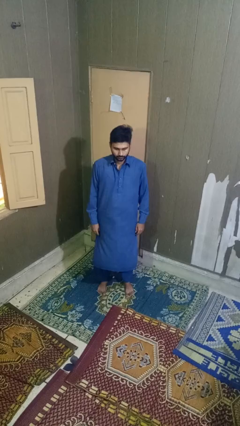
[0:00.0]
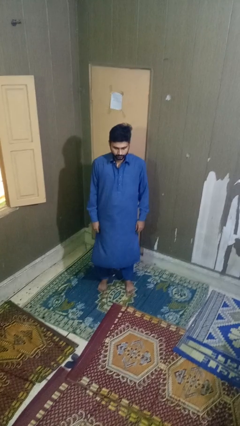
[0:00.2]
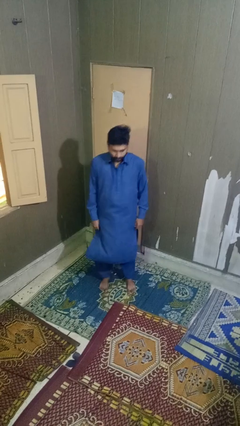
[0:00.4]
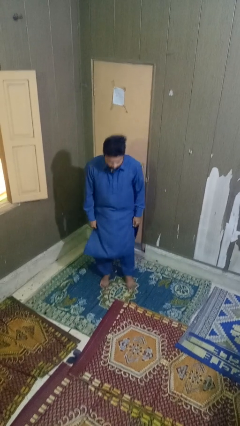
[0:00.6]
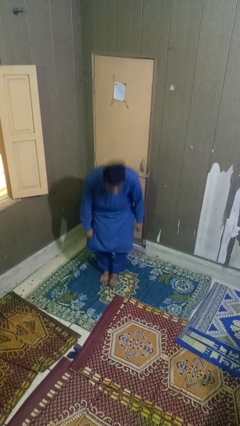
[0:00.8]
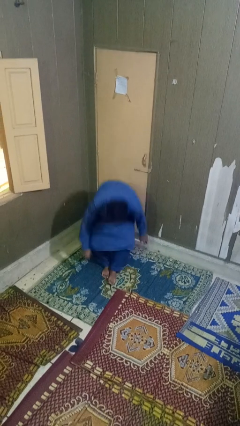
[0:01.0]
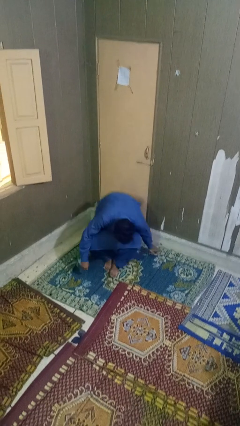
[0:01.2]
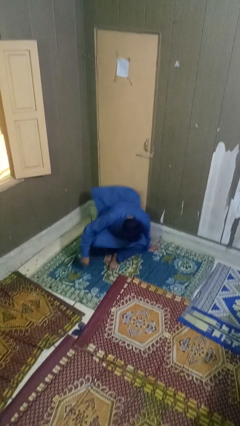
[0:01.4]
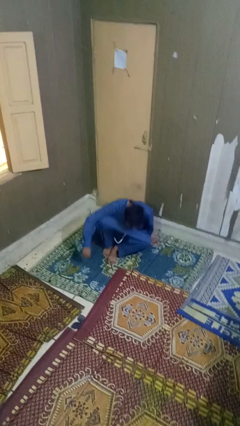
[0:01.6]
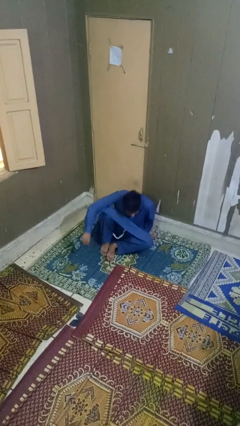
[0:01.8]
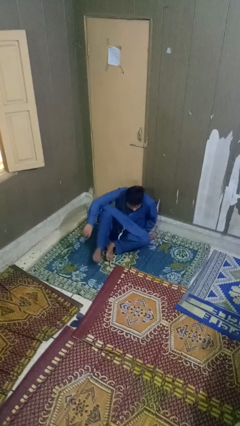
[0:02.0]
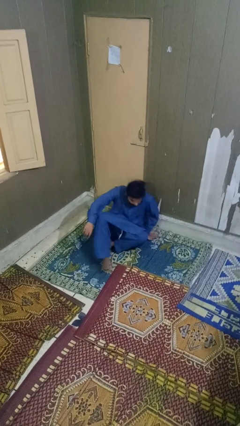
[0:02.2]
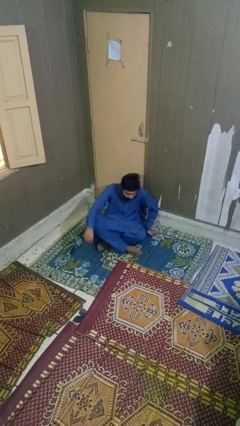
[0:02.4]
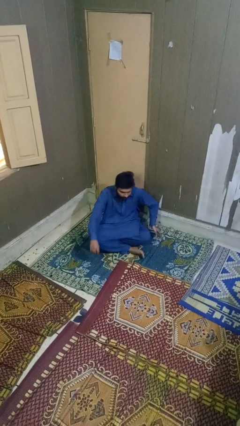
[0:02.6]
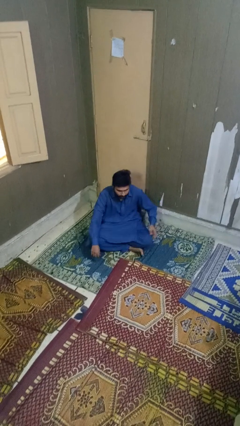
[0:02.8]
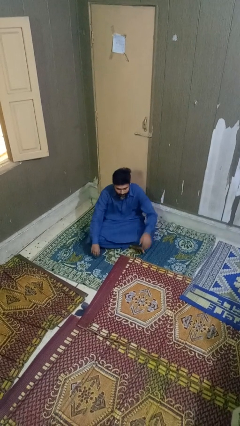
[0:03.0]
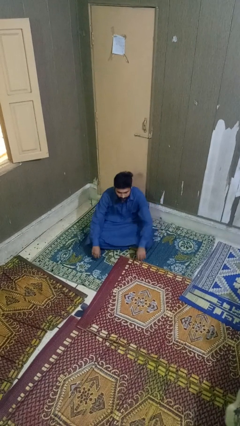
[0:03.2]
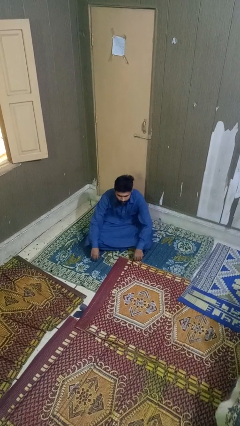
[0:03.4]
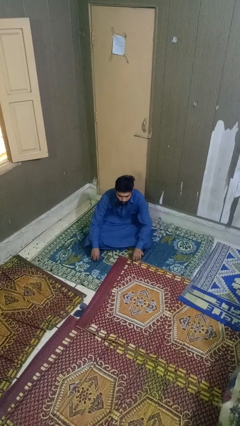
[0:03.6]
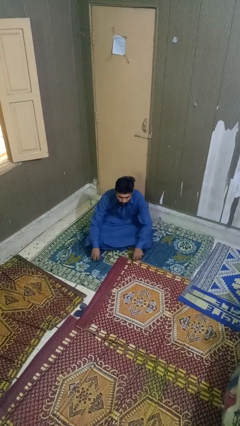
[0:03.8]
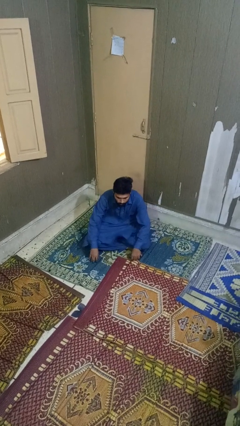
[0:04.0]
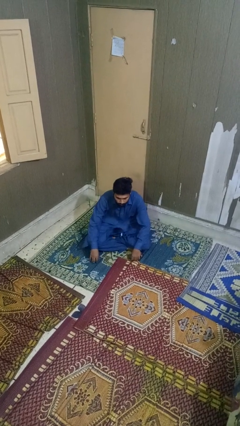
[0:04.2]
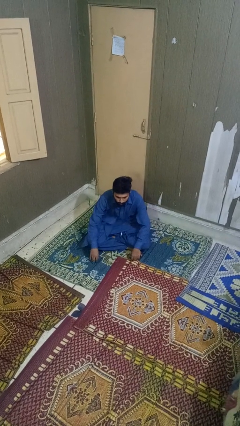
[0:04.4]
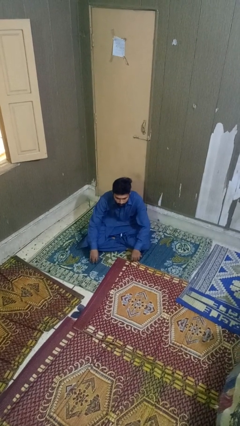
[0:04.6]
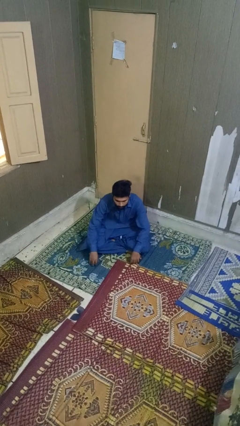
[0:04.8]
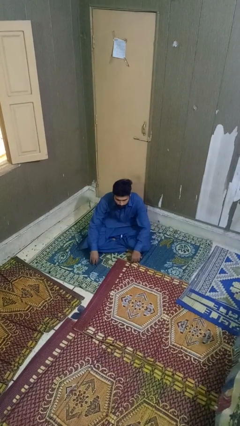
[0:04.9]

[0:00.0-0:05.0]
person sits crisscross

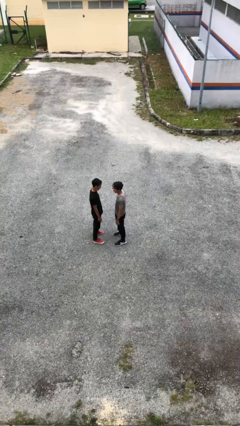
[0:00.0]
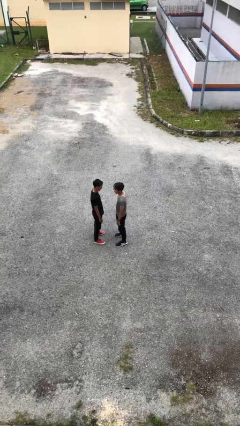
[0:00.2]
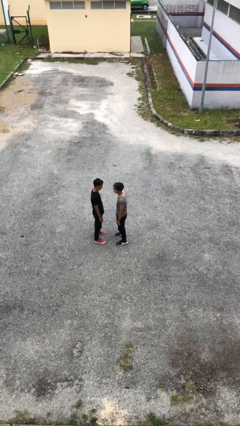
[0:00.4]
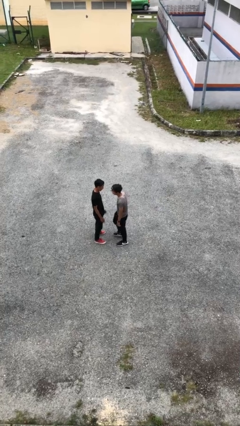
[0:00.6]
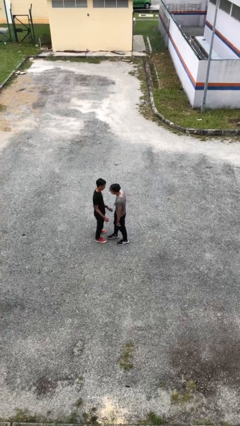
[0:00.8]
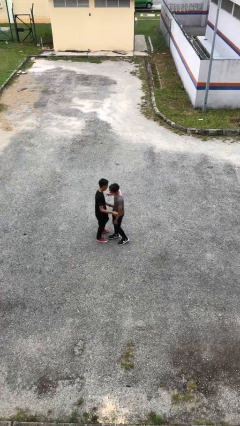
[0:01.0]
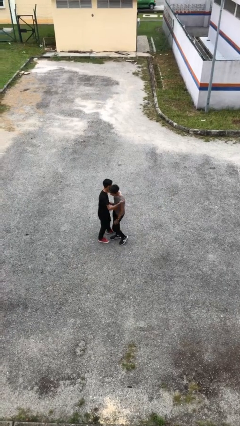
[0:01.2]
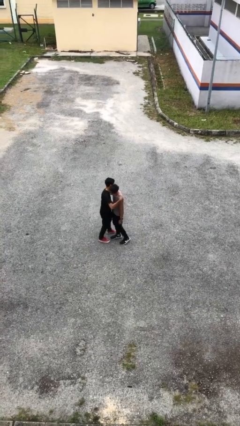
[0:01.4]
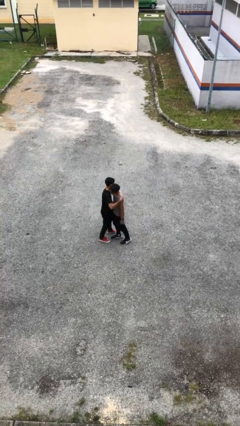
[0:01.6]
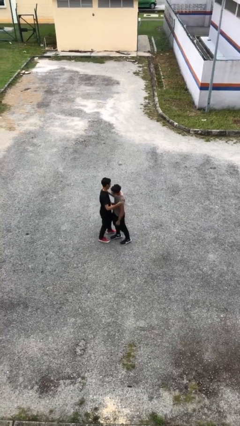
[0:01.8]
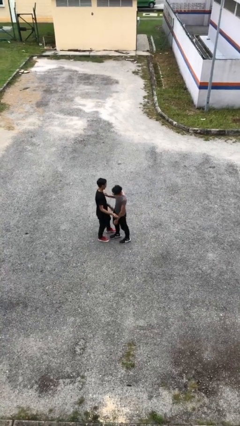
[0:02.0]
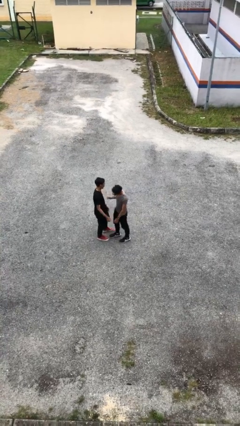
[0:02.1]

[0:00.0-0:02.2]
person embraces person

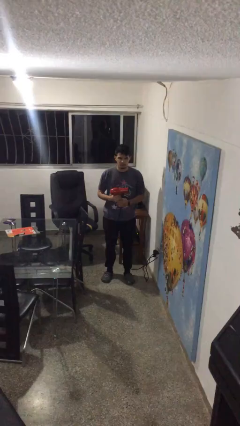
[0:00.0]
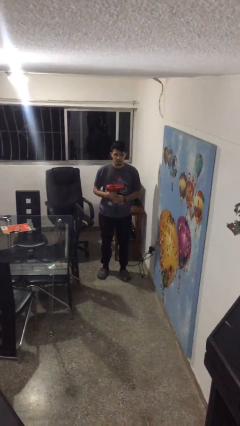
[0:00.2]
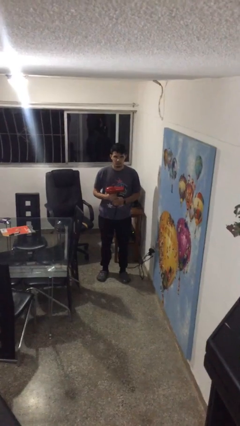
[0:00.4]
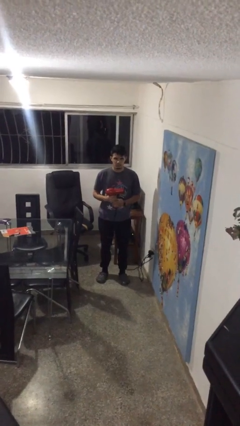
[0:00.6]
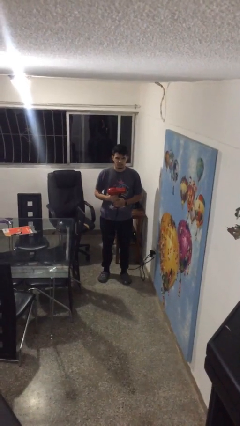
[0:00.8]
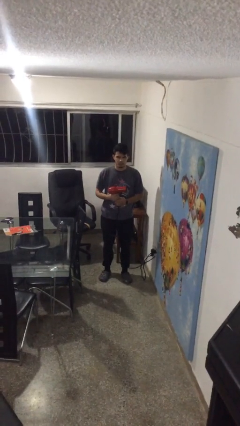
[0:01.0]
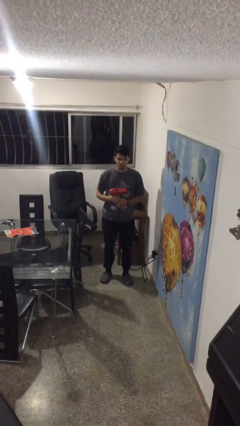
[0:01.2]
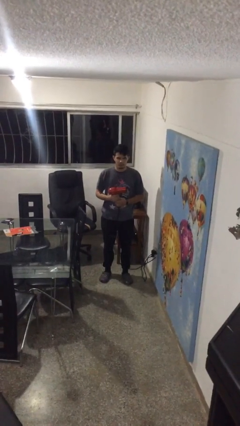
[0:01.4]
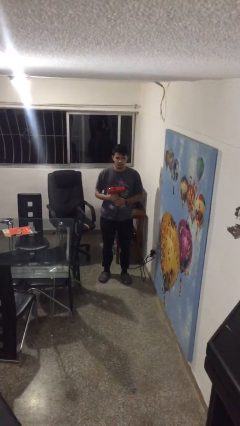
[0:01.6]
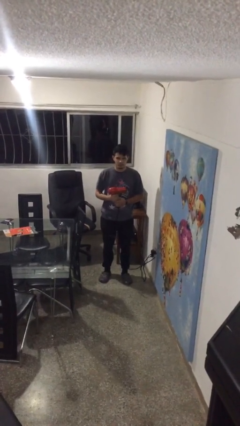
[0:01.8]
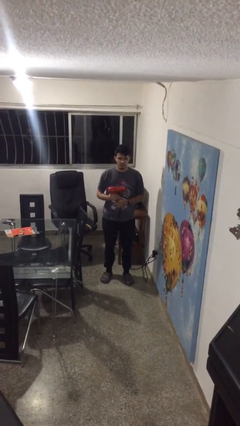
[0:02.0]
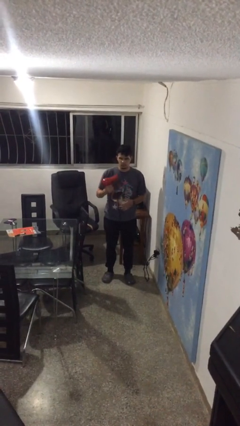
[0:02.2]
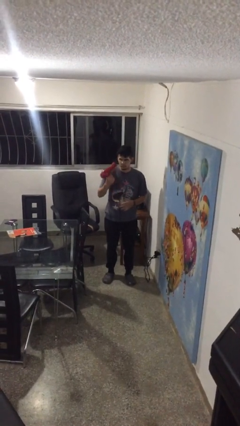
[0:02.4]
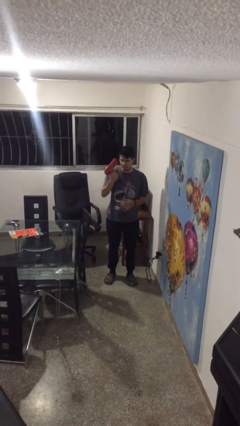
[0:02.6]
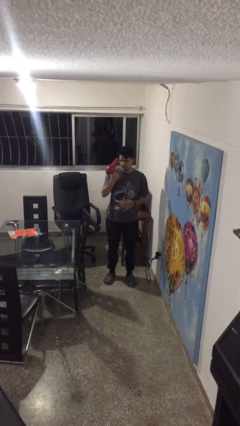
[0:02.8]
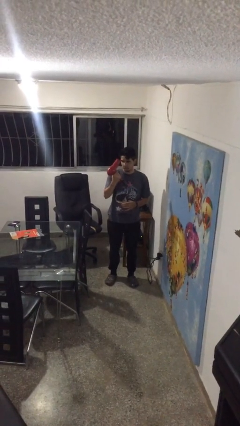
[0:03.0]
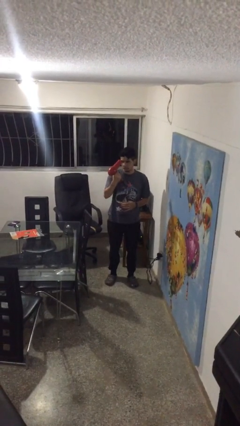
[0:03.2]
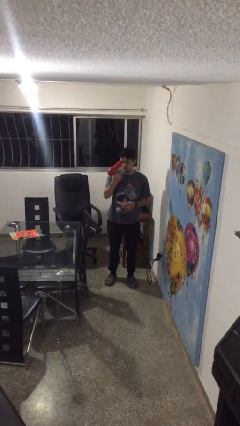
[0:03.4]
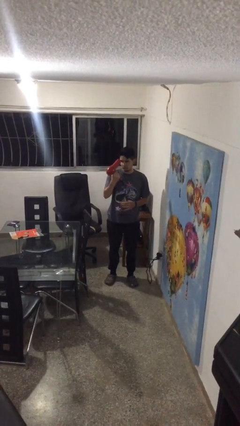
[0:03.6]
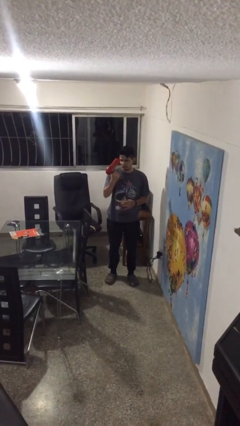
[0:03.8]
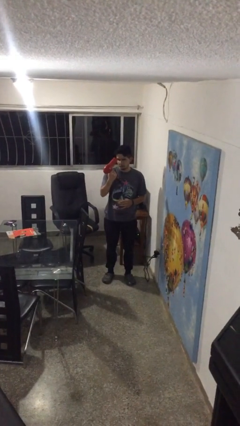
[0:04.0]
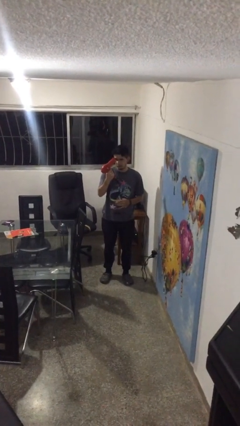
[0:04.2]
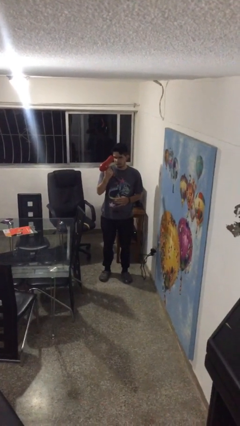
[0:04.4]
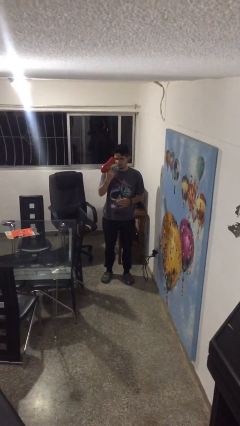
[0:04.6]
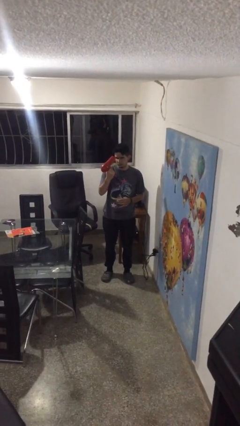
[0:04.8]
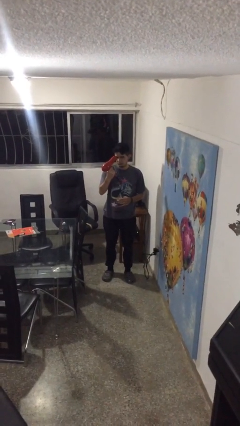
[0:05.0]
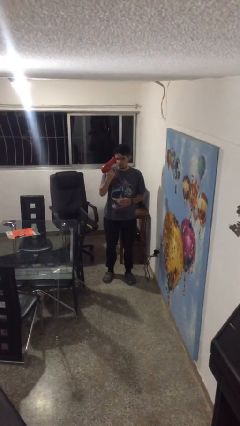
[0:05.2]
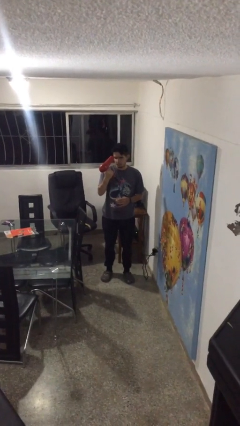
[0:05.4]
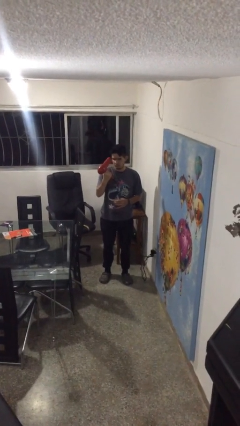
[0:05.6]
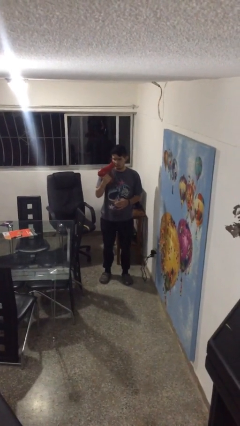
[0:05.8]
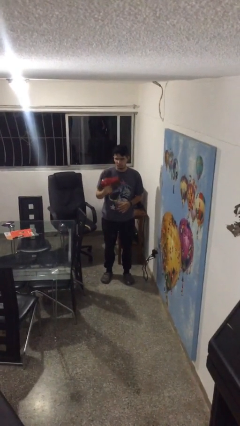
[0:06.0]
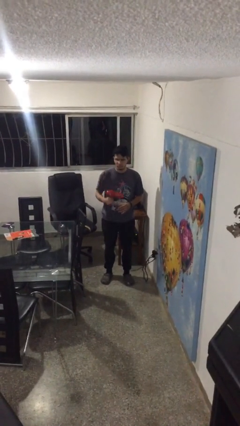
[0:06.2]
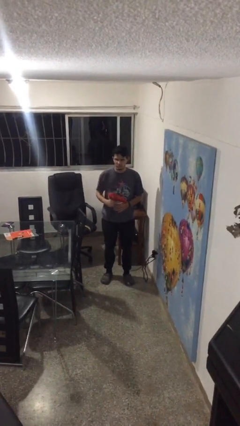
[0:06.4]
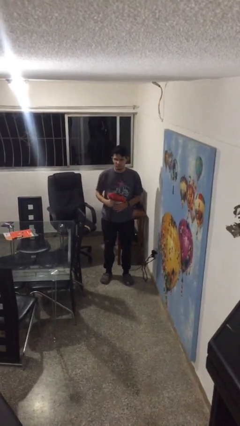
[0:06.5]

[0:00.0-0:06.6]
person dries hair with hairdryer

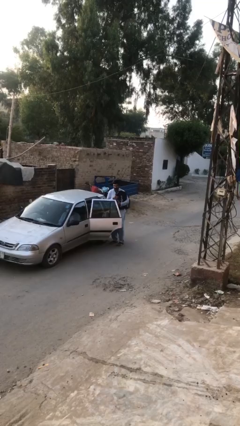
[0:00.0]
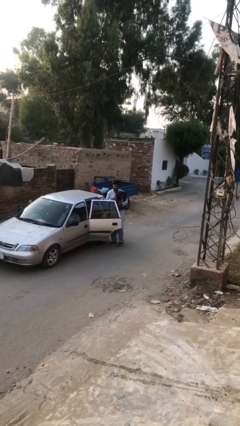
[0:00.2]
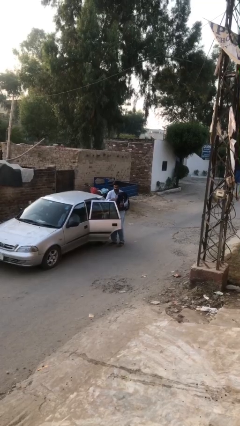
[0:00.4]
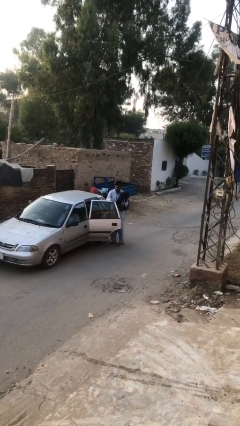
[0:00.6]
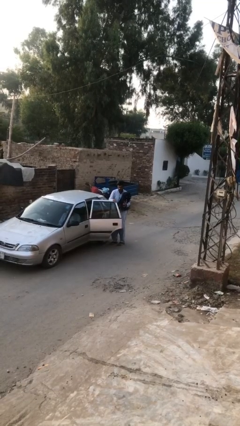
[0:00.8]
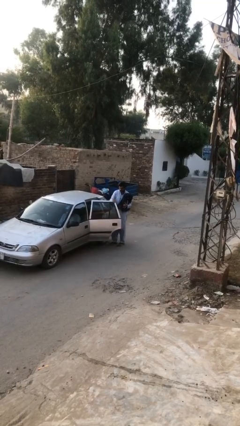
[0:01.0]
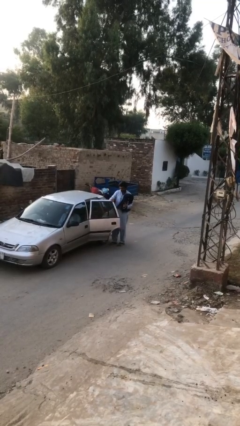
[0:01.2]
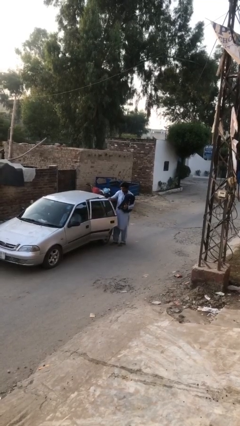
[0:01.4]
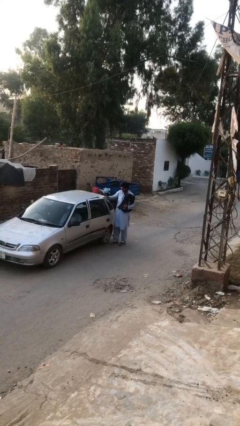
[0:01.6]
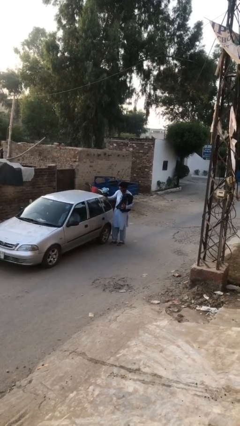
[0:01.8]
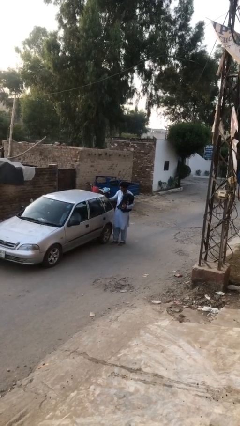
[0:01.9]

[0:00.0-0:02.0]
person closes car door

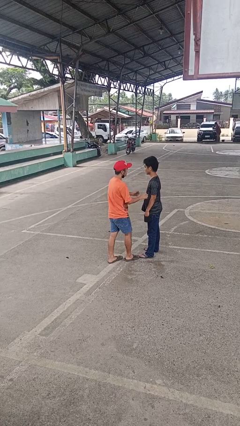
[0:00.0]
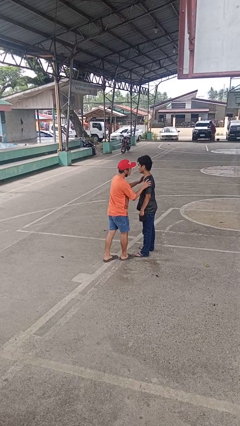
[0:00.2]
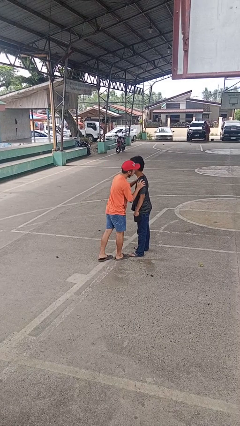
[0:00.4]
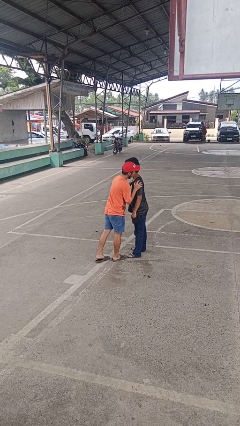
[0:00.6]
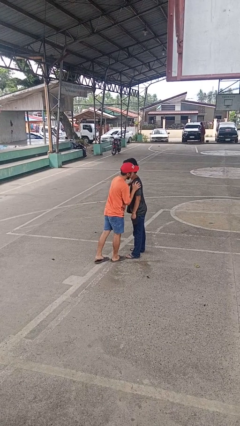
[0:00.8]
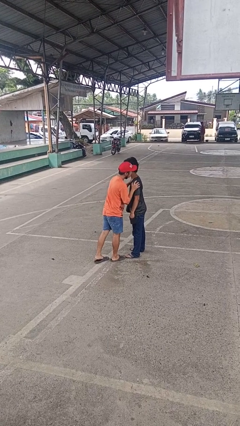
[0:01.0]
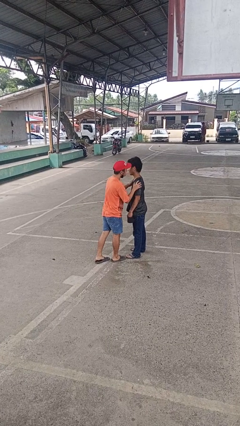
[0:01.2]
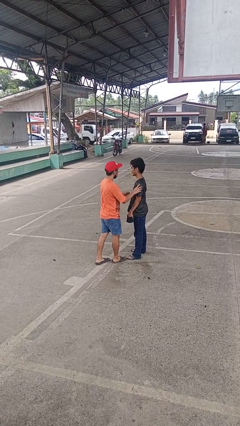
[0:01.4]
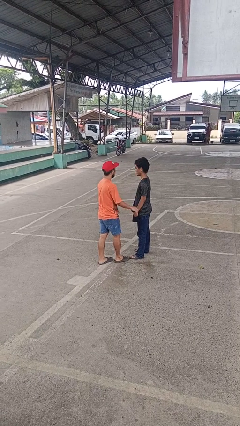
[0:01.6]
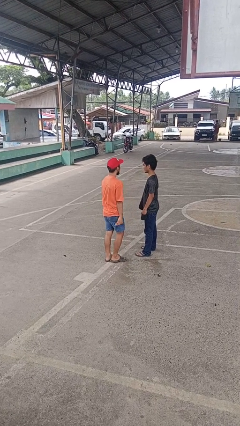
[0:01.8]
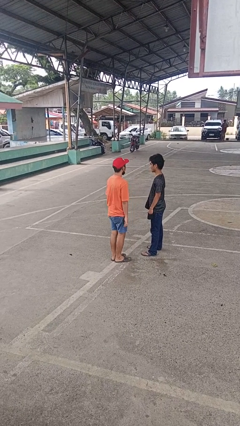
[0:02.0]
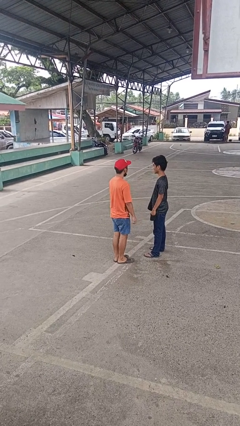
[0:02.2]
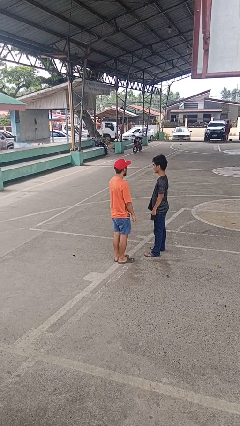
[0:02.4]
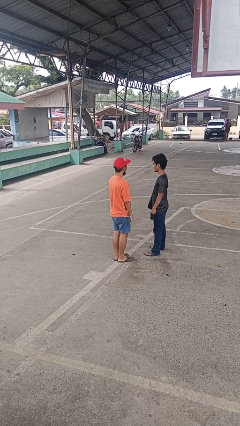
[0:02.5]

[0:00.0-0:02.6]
person kisses cheek of person
